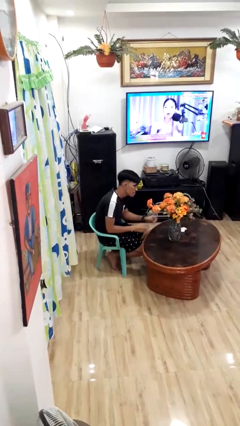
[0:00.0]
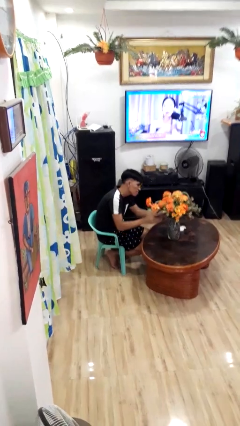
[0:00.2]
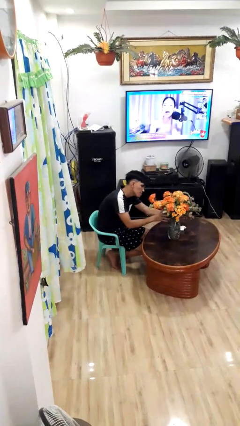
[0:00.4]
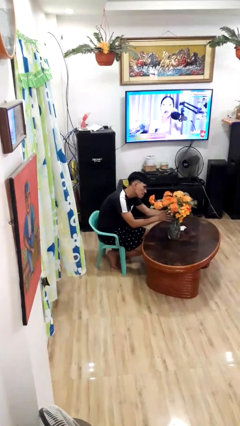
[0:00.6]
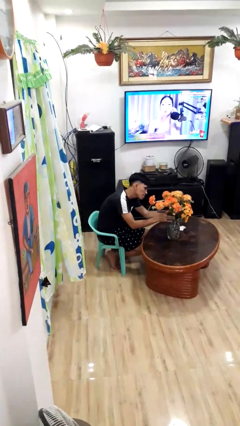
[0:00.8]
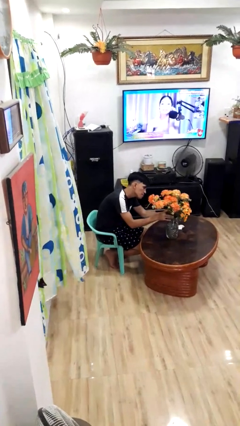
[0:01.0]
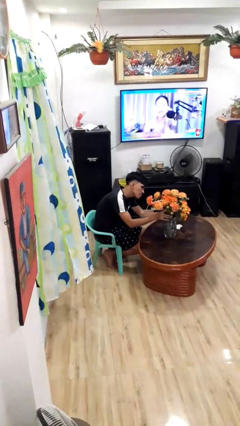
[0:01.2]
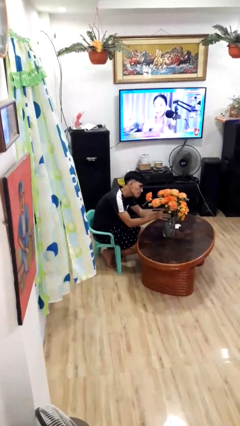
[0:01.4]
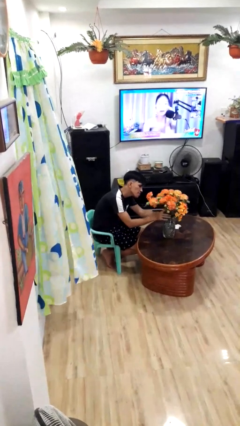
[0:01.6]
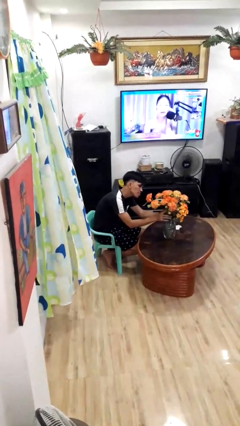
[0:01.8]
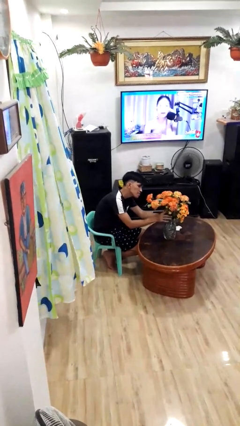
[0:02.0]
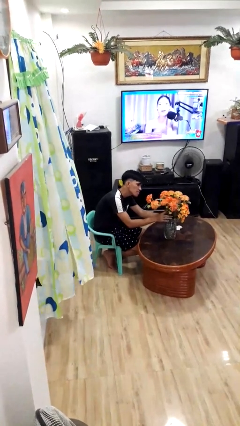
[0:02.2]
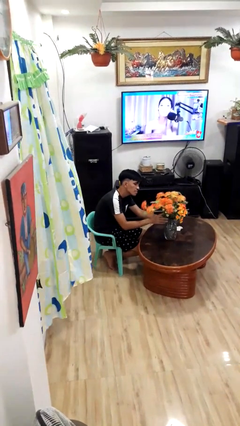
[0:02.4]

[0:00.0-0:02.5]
person arranges flowers in vase

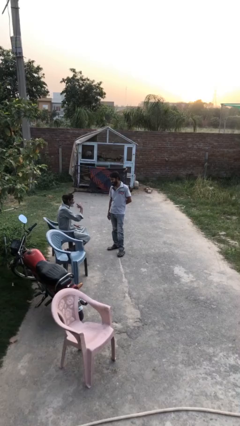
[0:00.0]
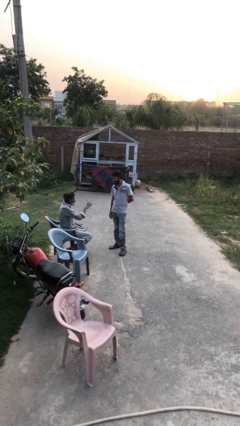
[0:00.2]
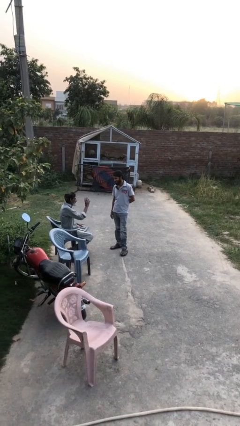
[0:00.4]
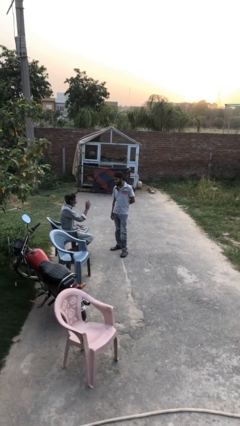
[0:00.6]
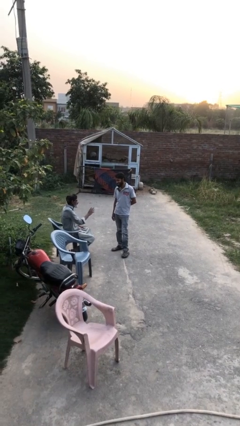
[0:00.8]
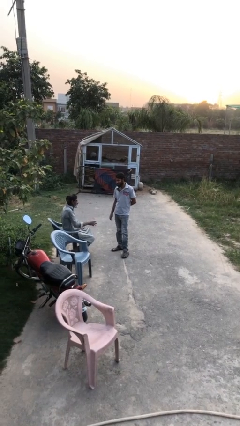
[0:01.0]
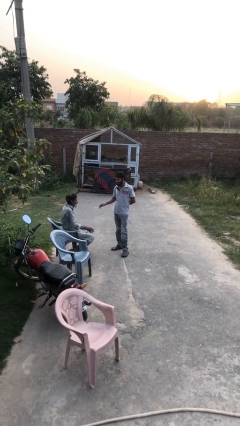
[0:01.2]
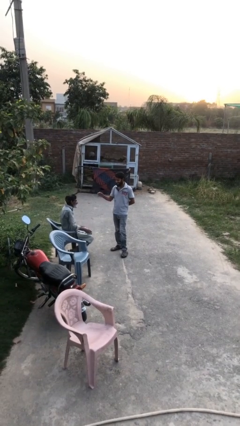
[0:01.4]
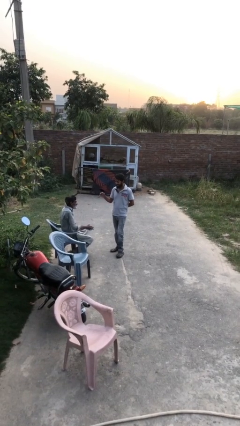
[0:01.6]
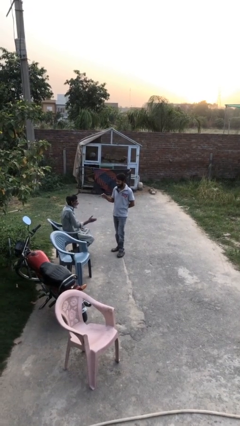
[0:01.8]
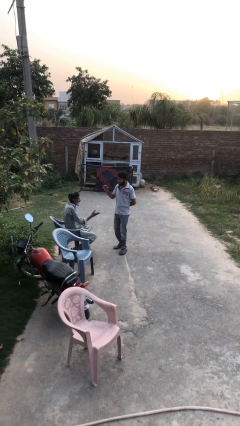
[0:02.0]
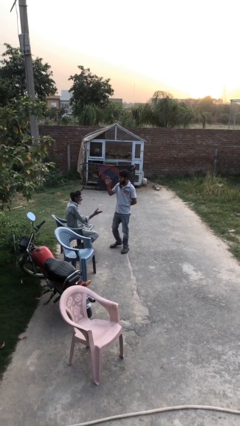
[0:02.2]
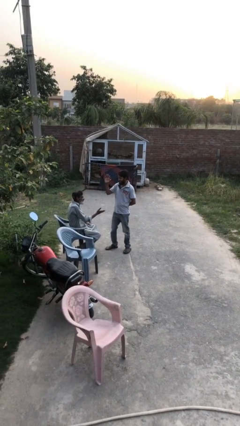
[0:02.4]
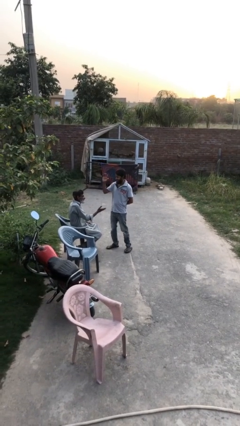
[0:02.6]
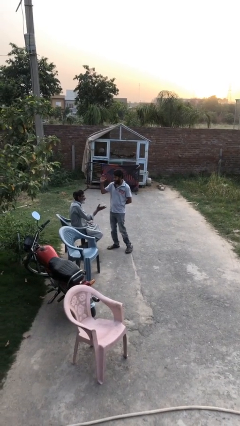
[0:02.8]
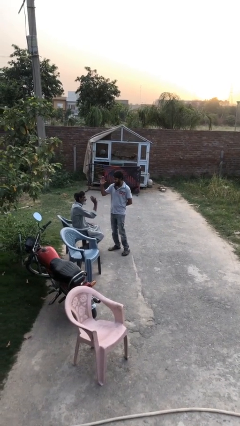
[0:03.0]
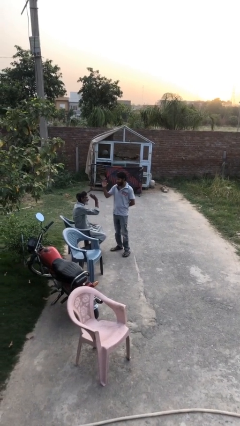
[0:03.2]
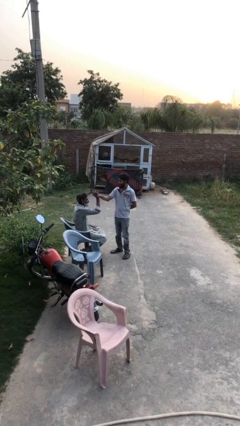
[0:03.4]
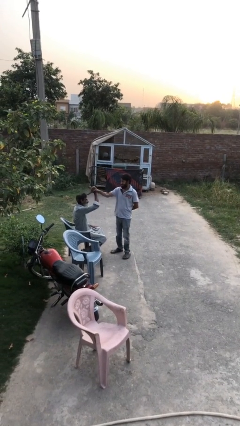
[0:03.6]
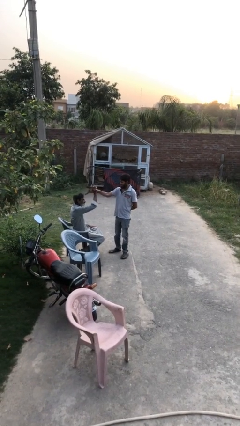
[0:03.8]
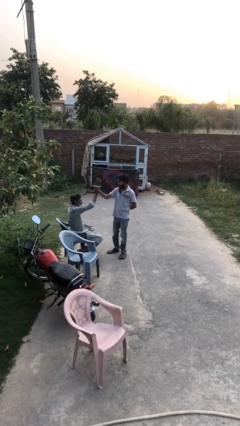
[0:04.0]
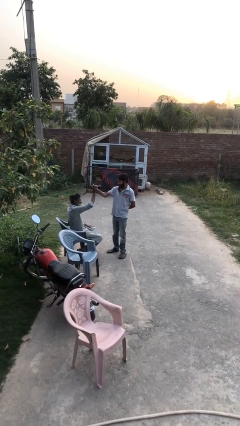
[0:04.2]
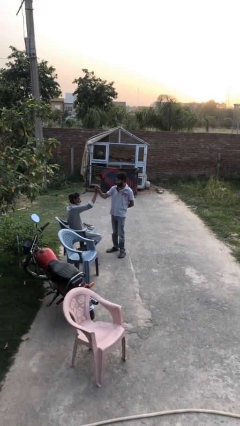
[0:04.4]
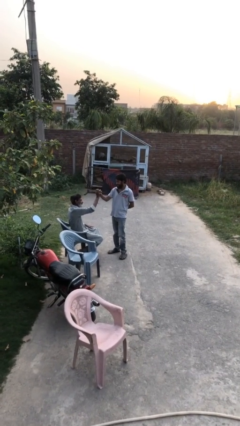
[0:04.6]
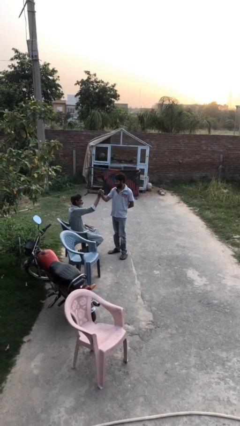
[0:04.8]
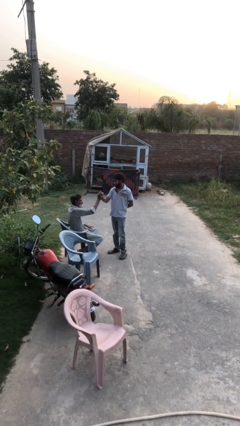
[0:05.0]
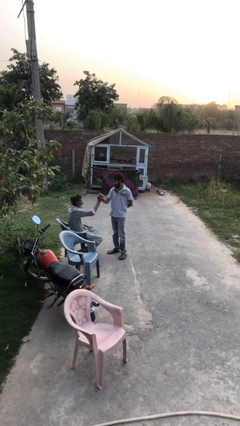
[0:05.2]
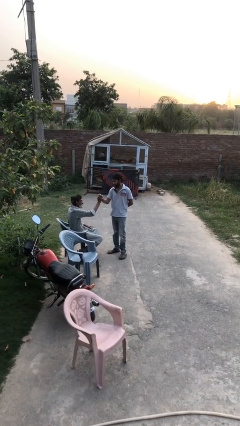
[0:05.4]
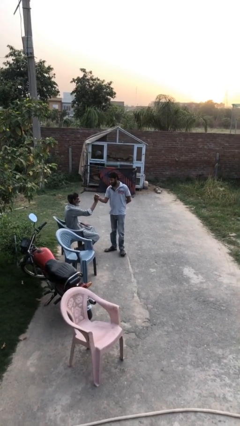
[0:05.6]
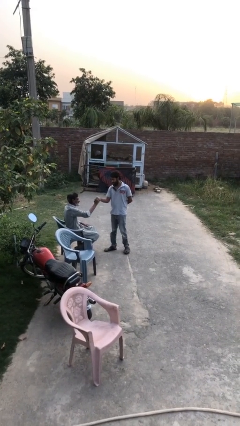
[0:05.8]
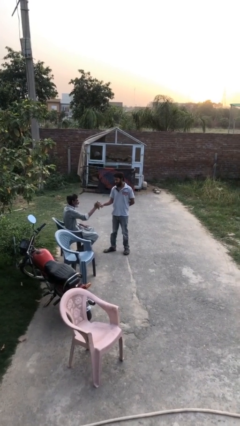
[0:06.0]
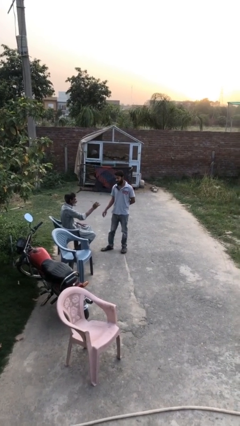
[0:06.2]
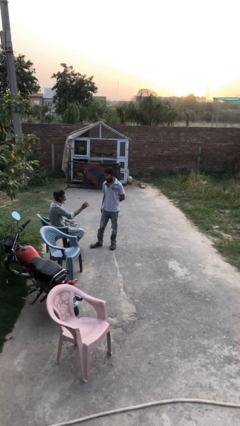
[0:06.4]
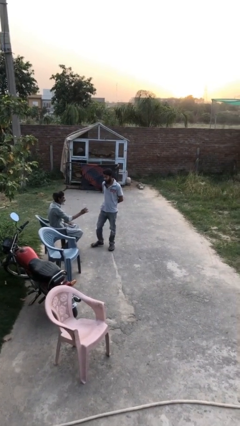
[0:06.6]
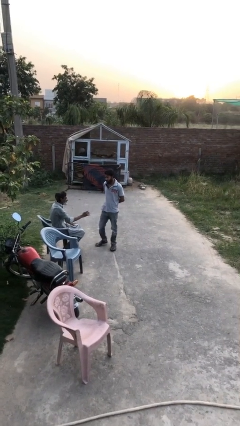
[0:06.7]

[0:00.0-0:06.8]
person highfives hand

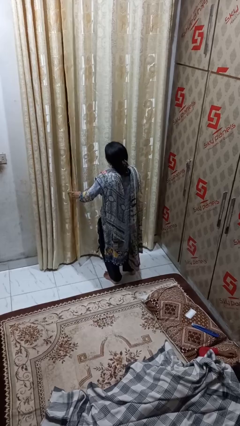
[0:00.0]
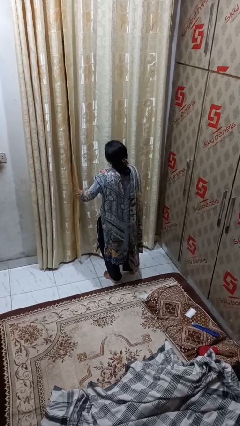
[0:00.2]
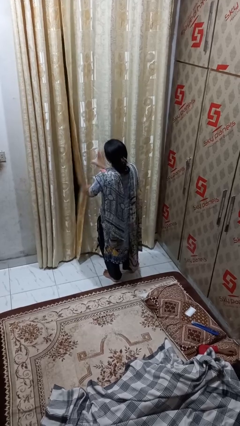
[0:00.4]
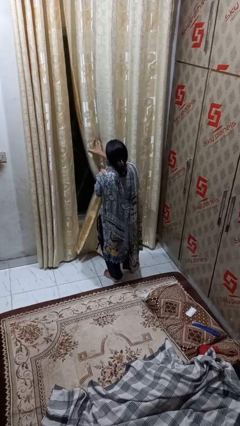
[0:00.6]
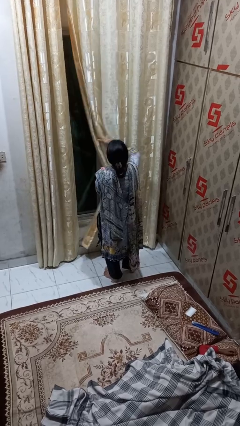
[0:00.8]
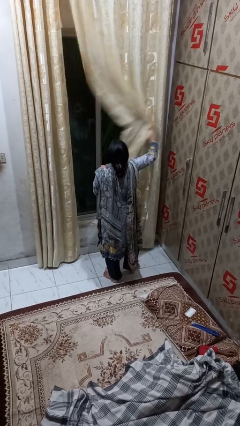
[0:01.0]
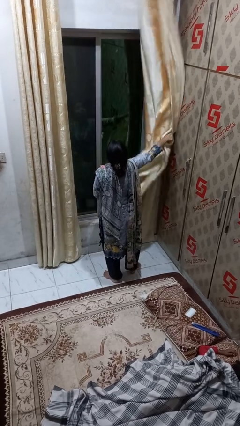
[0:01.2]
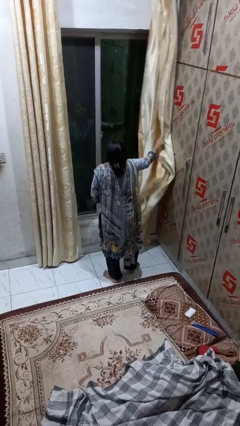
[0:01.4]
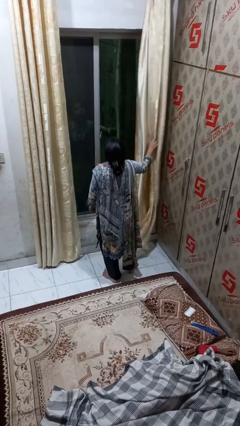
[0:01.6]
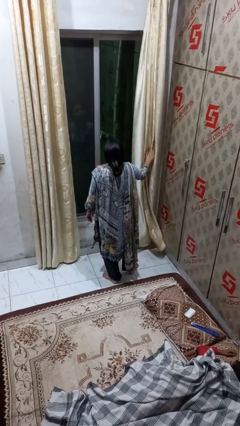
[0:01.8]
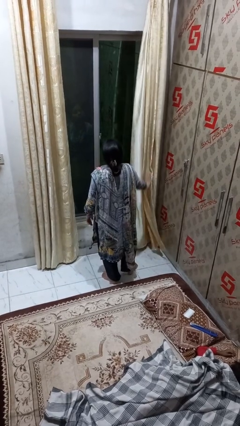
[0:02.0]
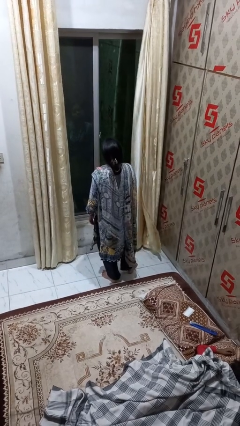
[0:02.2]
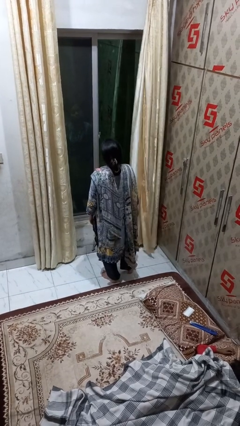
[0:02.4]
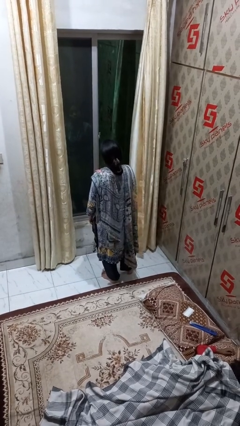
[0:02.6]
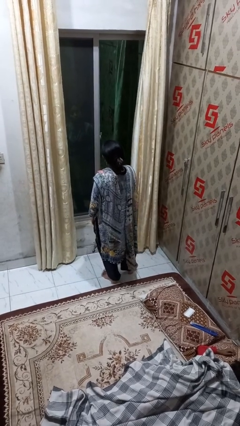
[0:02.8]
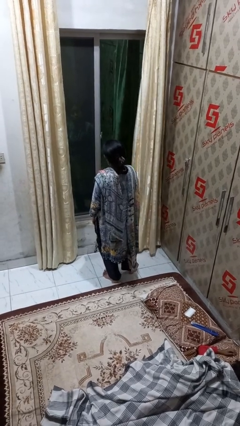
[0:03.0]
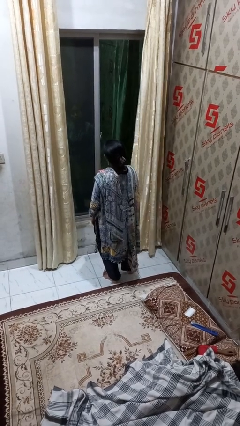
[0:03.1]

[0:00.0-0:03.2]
person opens curtains

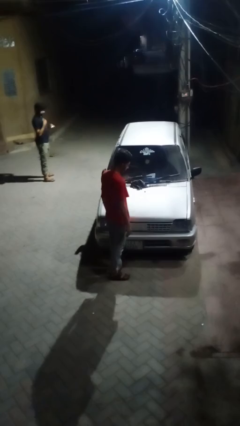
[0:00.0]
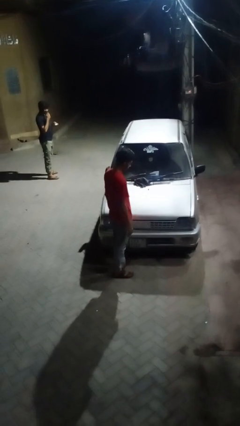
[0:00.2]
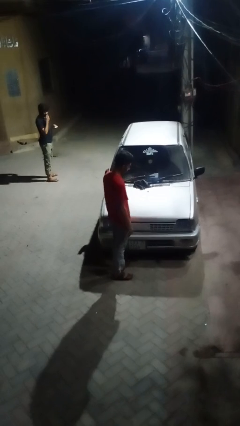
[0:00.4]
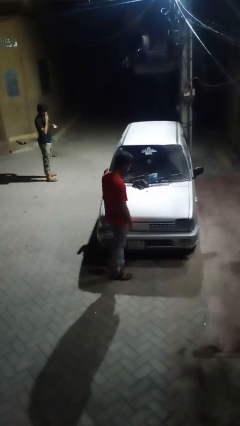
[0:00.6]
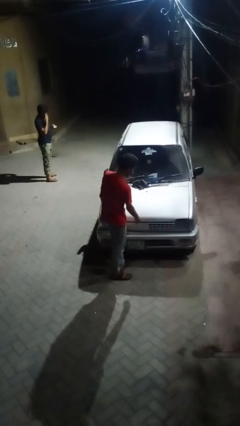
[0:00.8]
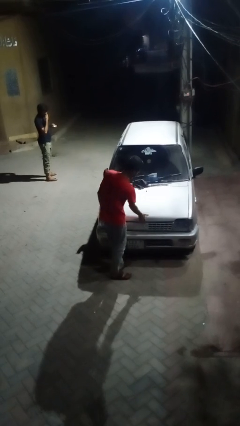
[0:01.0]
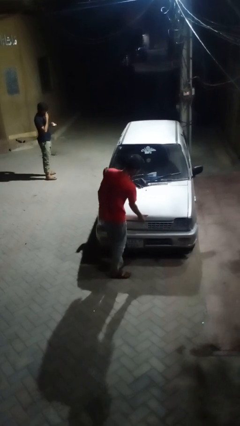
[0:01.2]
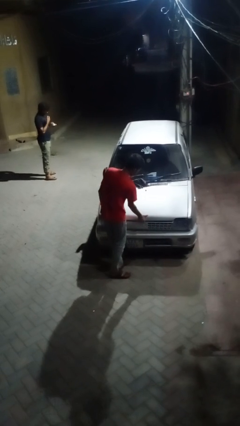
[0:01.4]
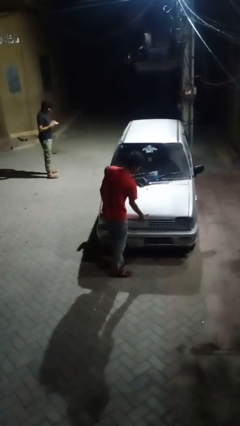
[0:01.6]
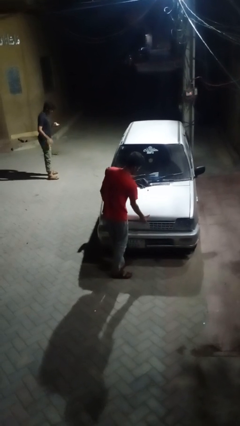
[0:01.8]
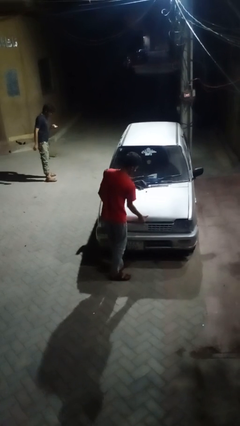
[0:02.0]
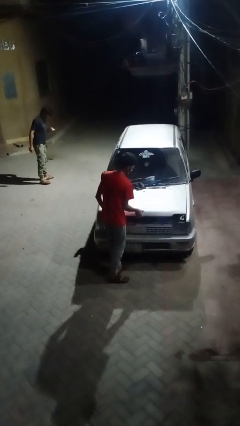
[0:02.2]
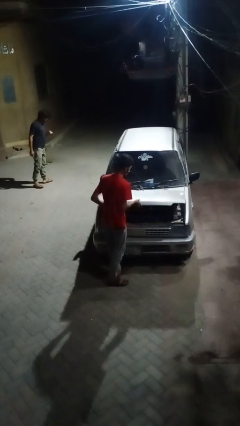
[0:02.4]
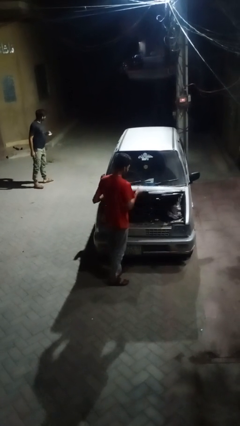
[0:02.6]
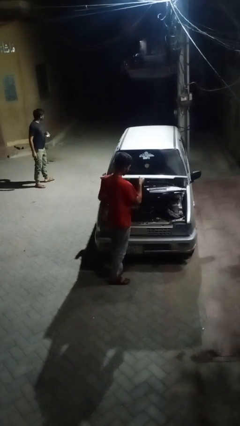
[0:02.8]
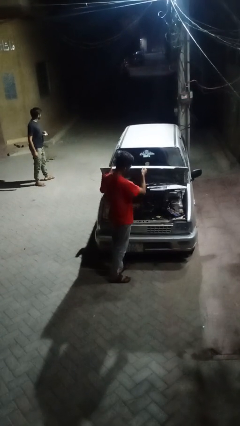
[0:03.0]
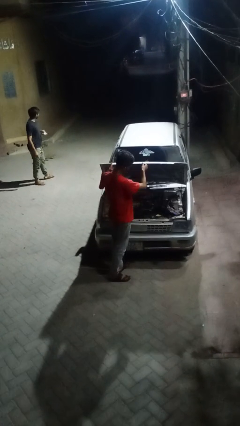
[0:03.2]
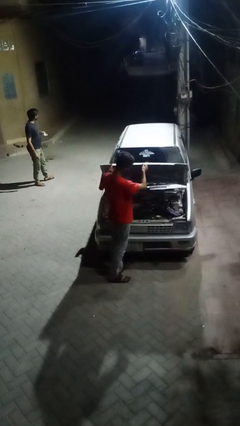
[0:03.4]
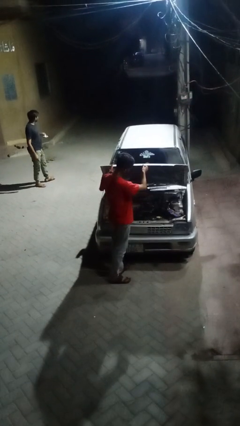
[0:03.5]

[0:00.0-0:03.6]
person opens car hood

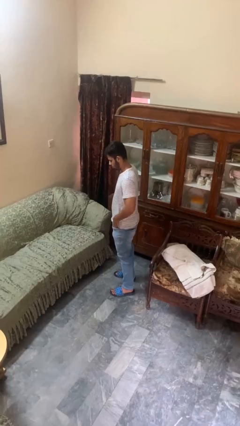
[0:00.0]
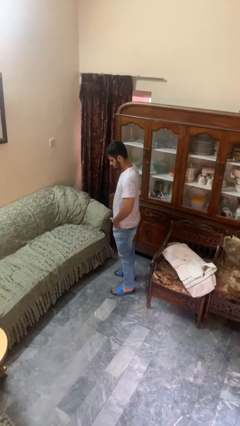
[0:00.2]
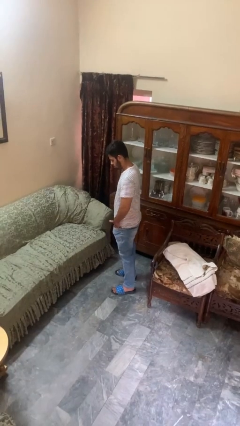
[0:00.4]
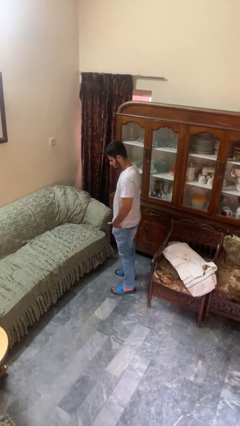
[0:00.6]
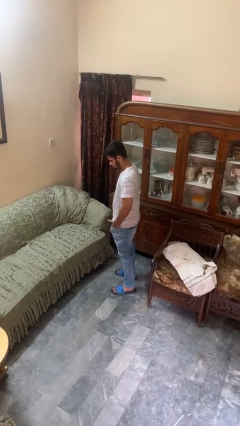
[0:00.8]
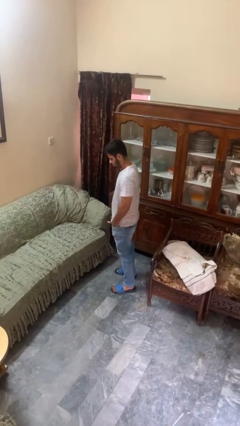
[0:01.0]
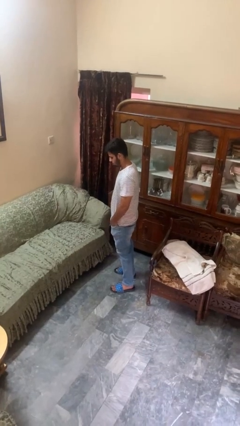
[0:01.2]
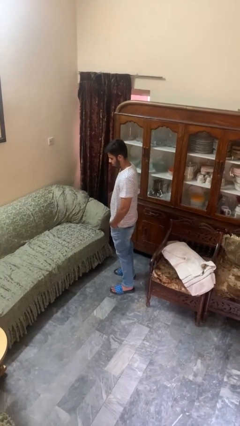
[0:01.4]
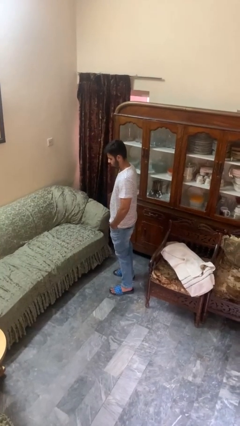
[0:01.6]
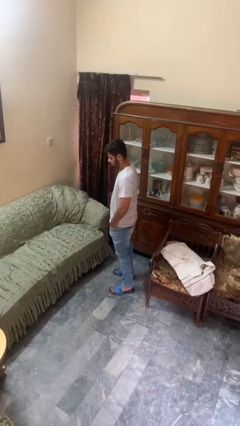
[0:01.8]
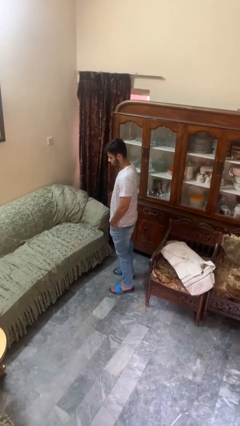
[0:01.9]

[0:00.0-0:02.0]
person puts hands in back pockets
